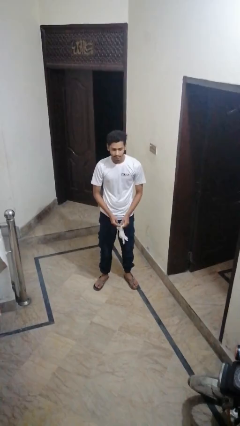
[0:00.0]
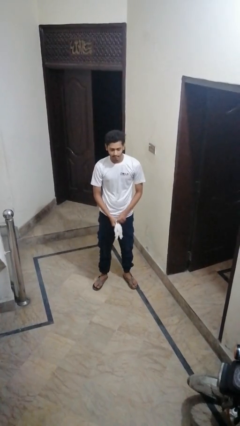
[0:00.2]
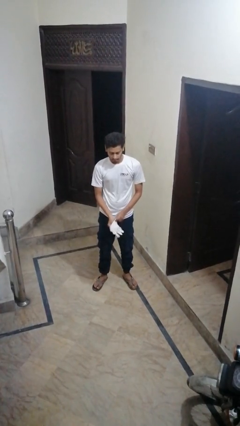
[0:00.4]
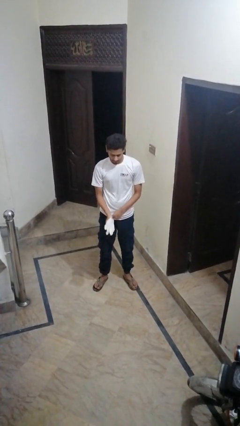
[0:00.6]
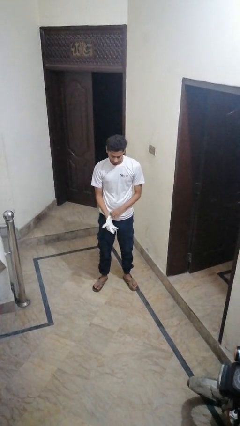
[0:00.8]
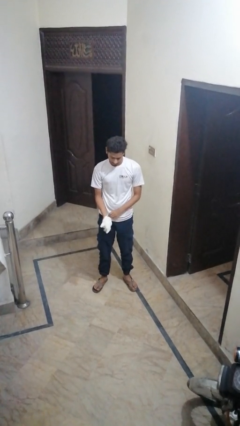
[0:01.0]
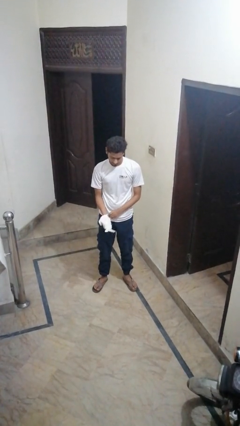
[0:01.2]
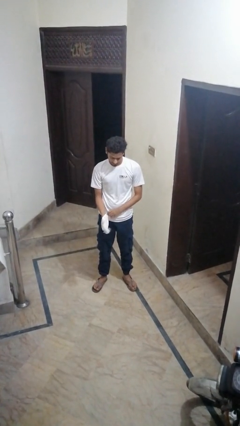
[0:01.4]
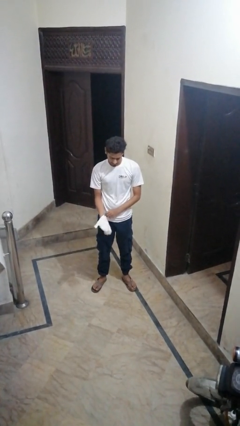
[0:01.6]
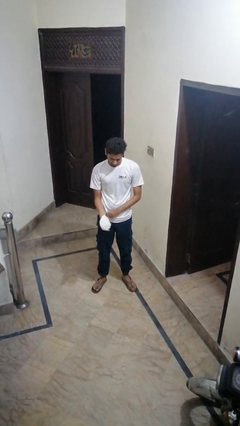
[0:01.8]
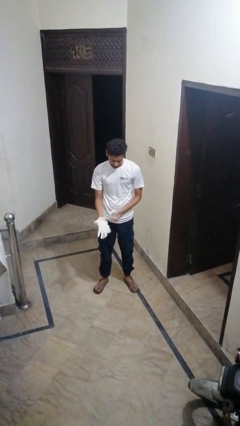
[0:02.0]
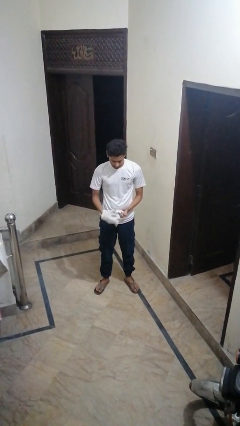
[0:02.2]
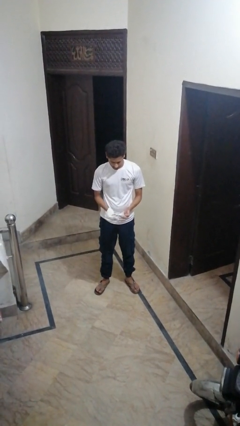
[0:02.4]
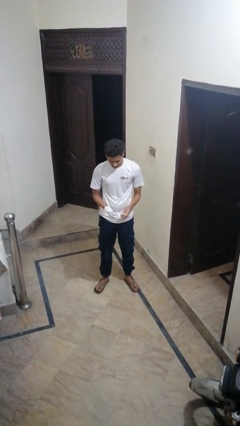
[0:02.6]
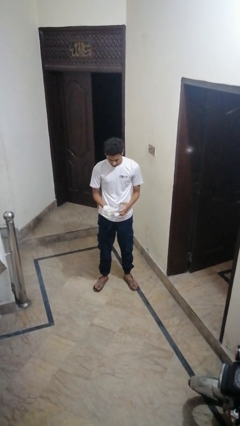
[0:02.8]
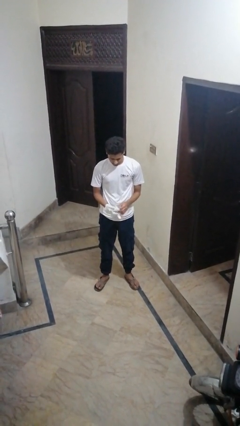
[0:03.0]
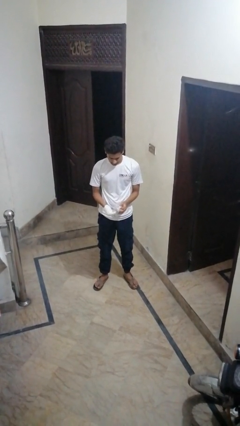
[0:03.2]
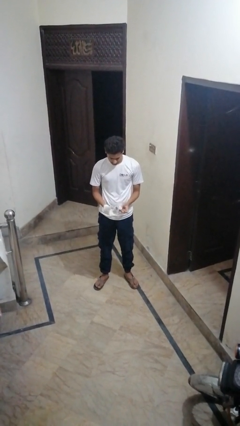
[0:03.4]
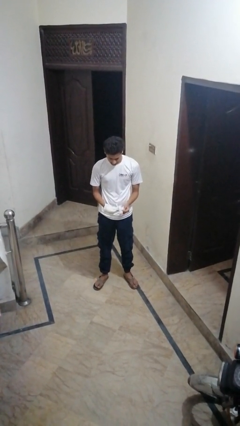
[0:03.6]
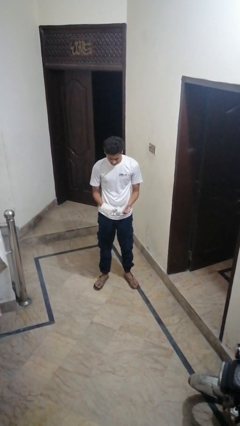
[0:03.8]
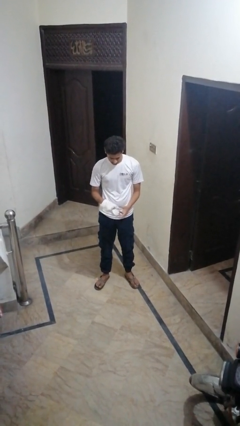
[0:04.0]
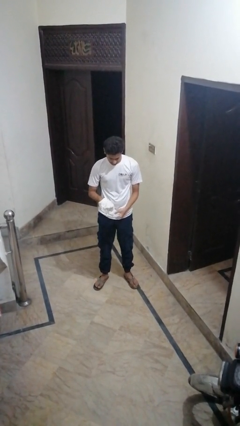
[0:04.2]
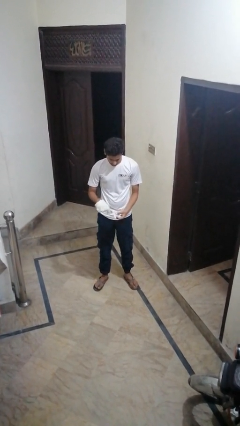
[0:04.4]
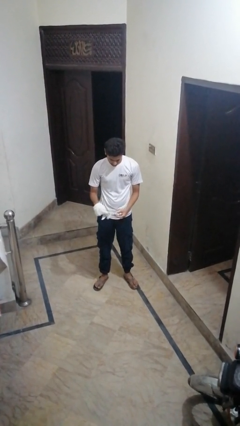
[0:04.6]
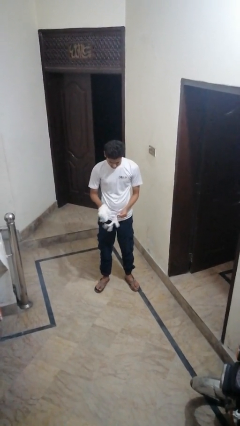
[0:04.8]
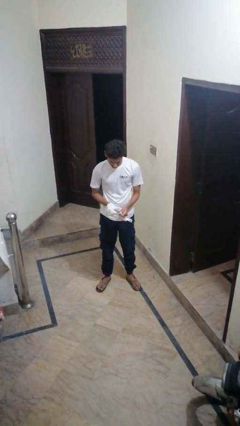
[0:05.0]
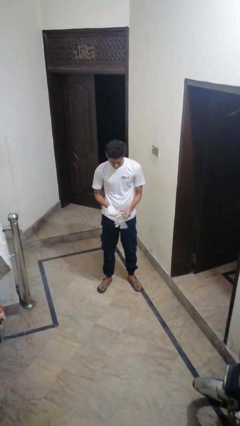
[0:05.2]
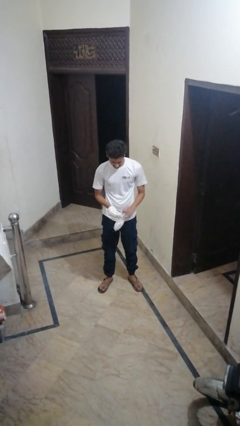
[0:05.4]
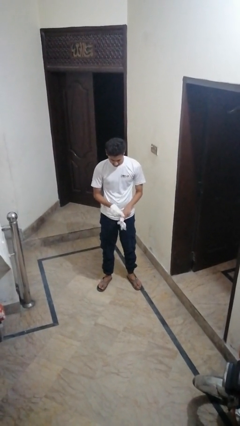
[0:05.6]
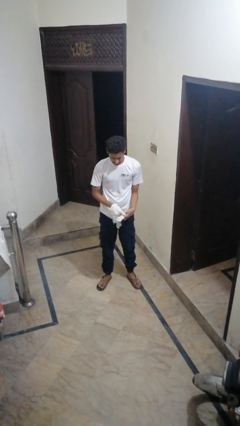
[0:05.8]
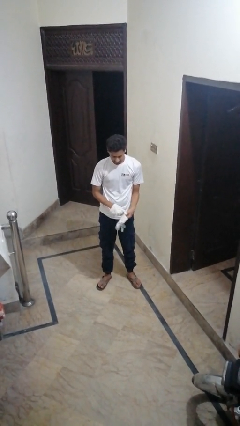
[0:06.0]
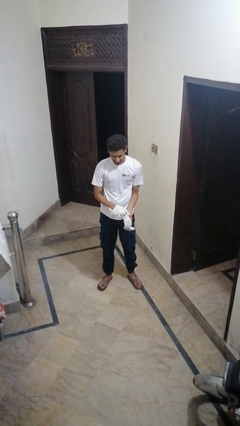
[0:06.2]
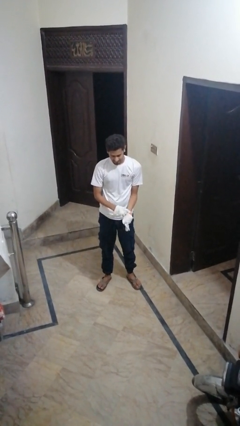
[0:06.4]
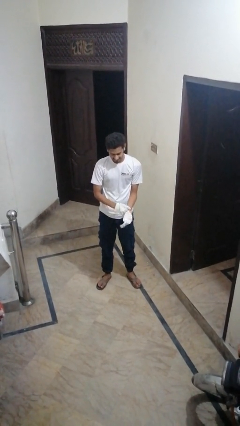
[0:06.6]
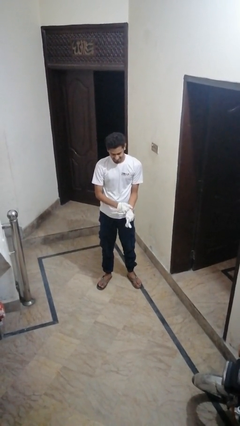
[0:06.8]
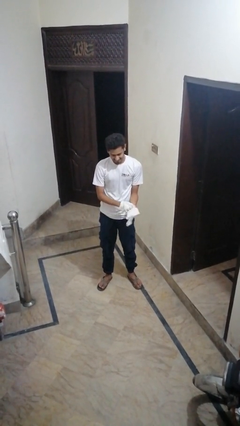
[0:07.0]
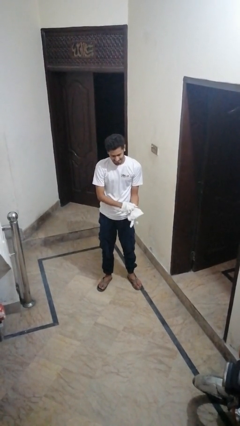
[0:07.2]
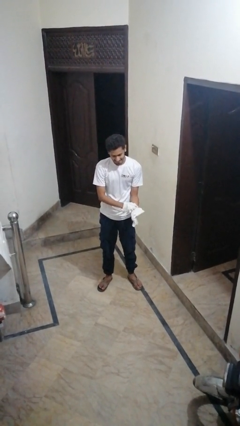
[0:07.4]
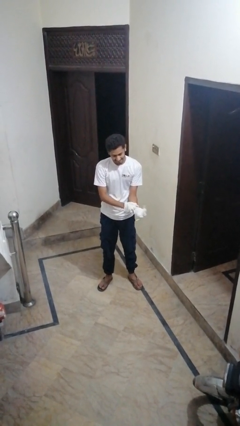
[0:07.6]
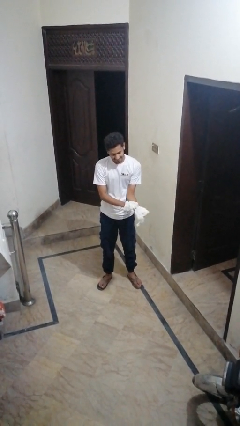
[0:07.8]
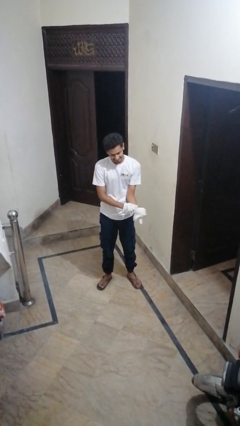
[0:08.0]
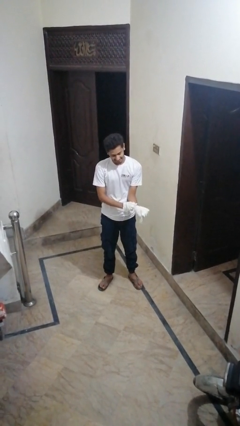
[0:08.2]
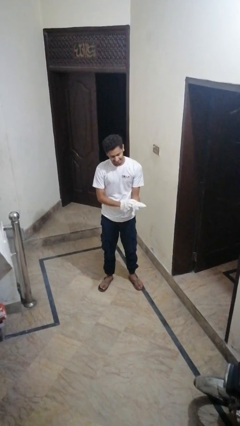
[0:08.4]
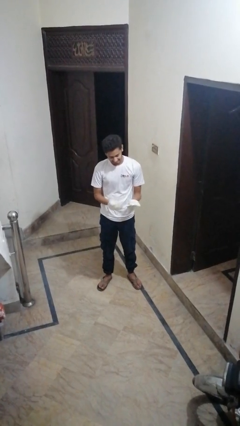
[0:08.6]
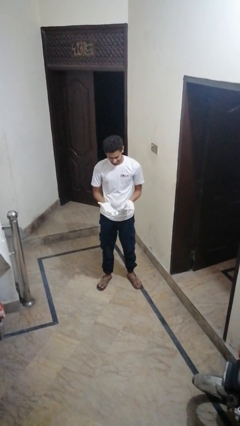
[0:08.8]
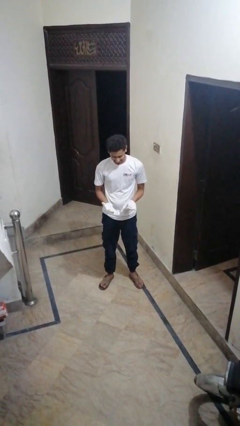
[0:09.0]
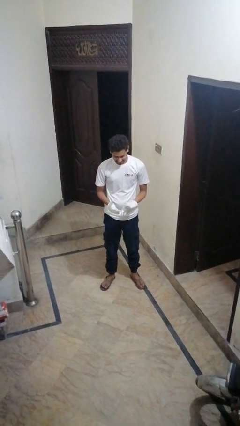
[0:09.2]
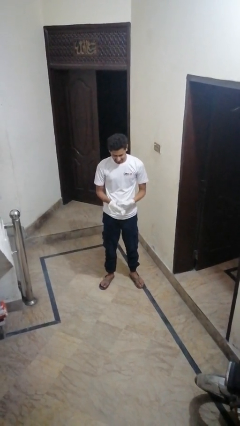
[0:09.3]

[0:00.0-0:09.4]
person puts on gloves

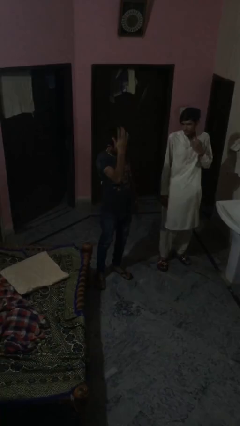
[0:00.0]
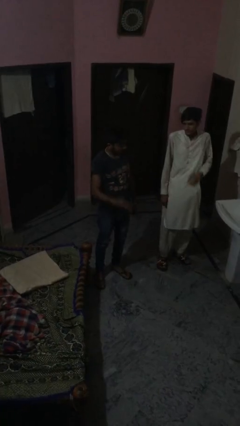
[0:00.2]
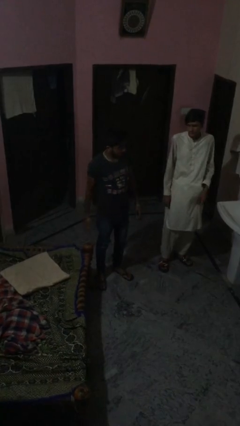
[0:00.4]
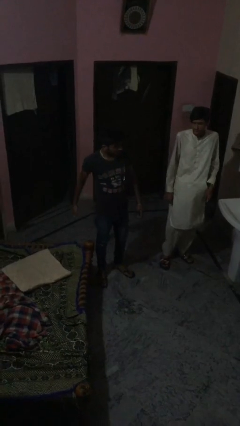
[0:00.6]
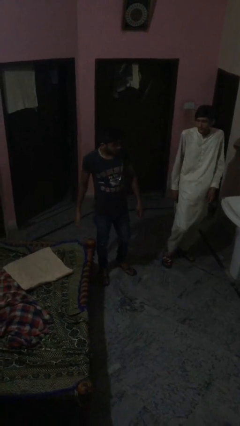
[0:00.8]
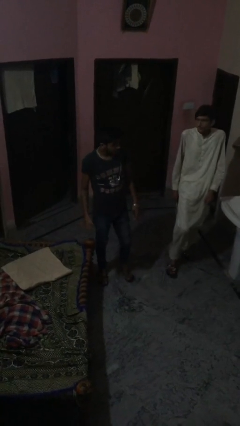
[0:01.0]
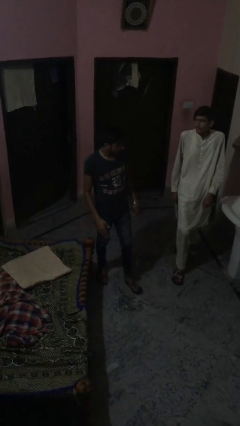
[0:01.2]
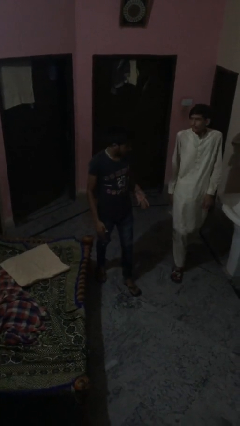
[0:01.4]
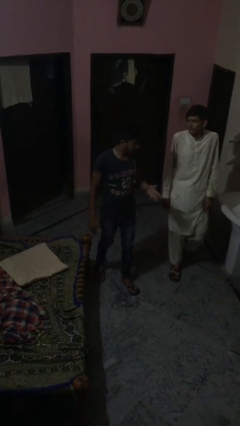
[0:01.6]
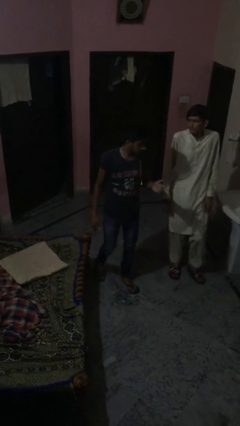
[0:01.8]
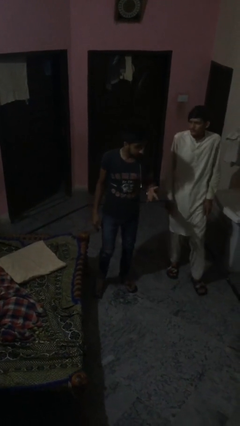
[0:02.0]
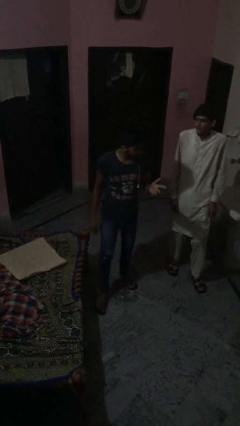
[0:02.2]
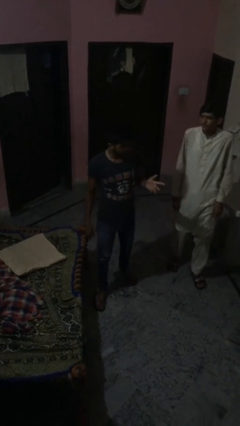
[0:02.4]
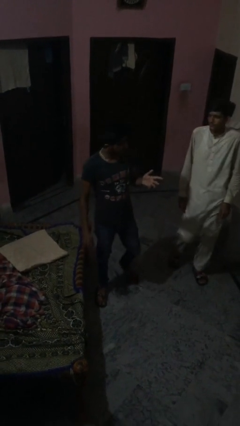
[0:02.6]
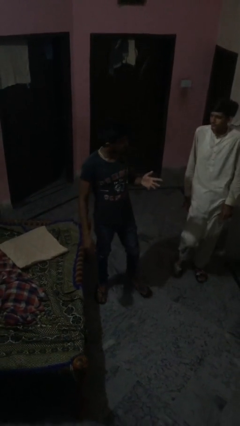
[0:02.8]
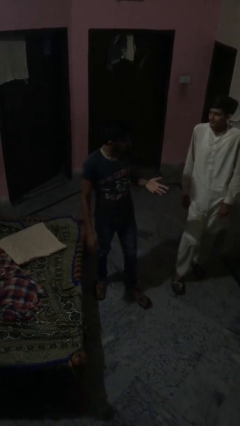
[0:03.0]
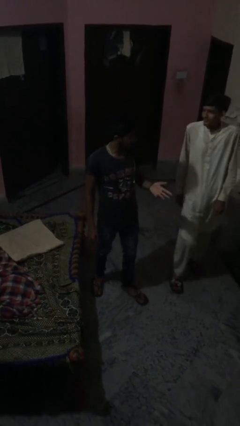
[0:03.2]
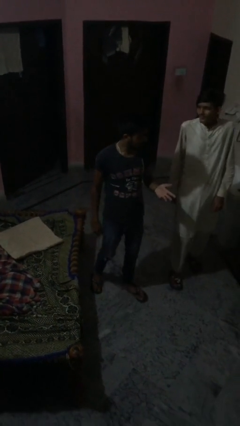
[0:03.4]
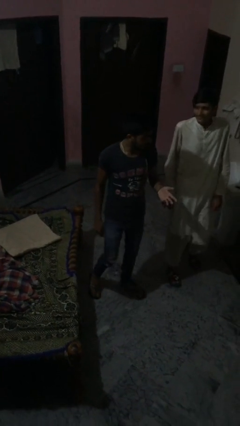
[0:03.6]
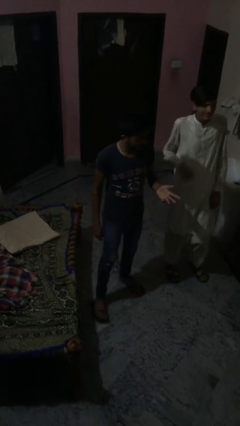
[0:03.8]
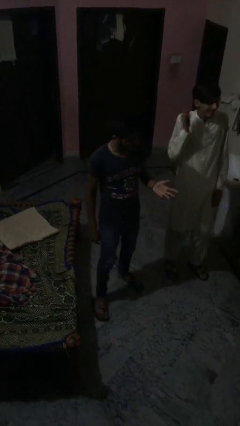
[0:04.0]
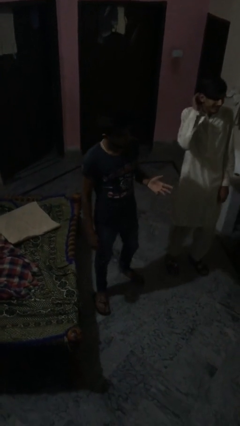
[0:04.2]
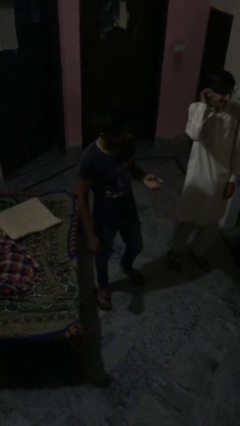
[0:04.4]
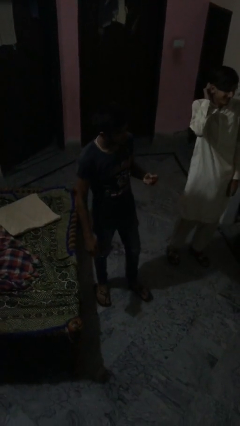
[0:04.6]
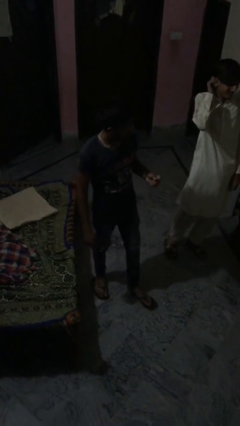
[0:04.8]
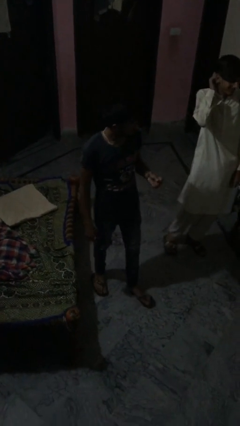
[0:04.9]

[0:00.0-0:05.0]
person talks to person

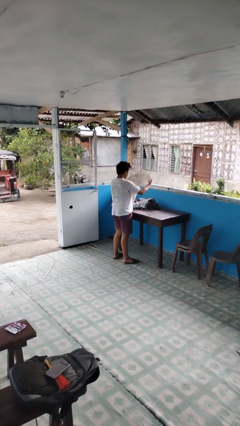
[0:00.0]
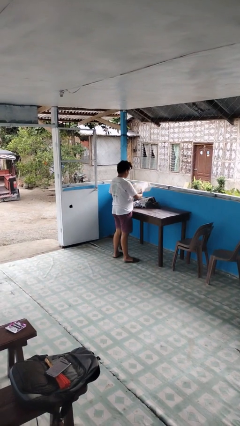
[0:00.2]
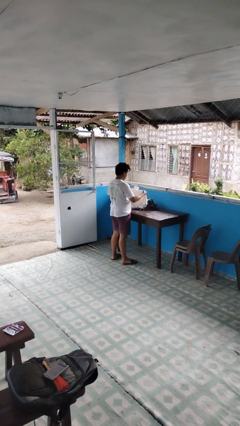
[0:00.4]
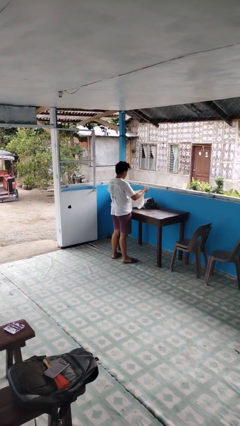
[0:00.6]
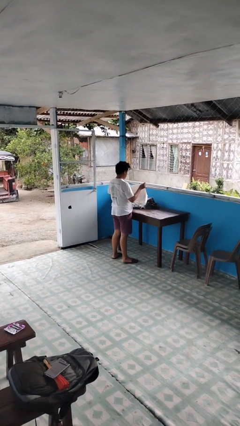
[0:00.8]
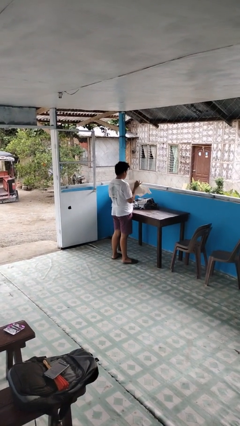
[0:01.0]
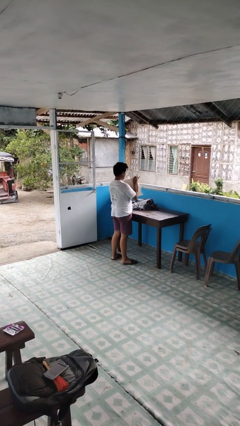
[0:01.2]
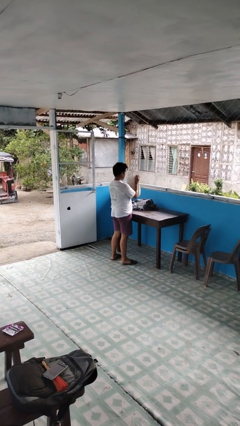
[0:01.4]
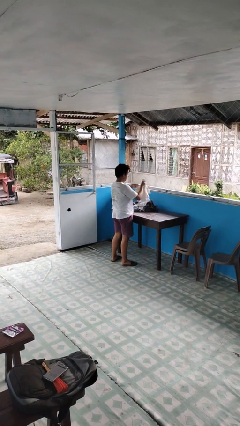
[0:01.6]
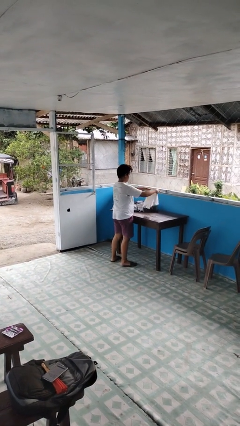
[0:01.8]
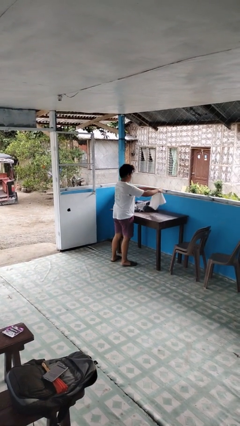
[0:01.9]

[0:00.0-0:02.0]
person folds shirt

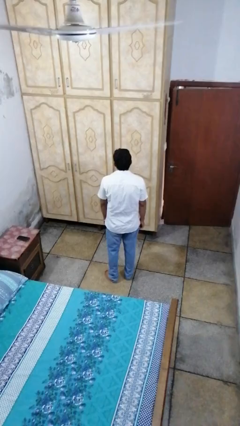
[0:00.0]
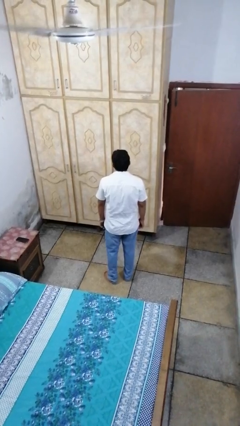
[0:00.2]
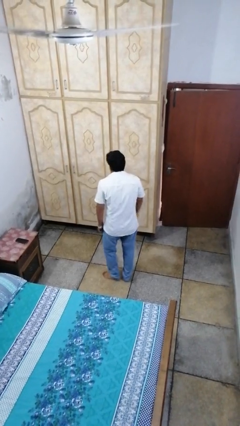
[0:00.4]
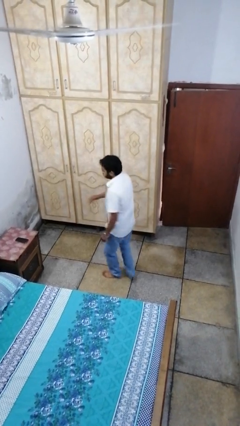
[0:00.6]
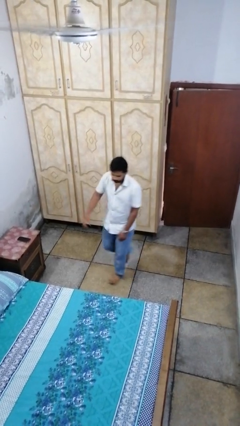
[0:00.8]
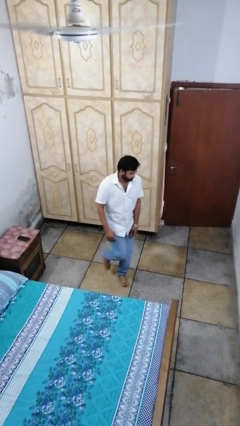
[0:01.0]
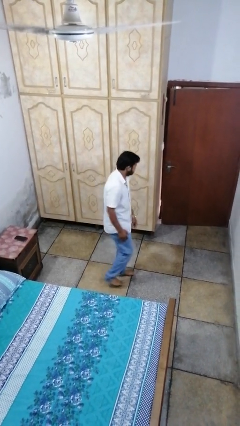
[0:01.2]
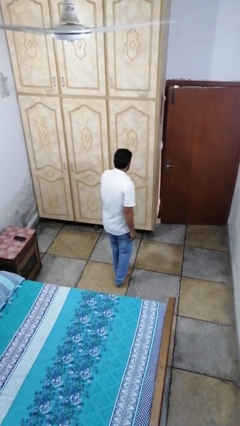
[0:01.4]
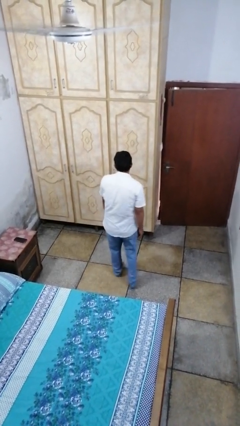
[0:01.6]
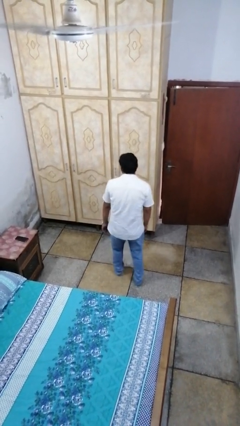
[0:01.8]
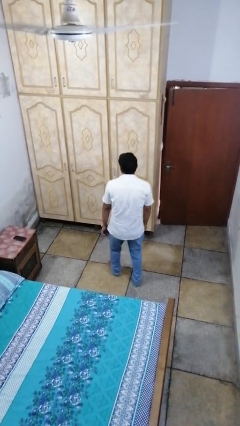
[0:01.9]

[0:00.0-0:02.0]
person twirls
